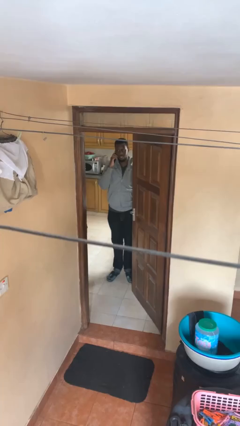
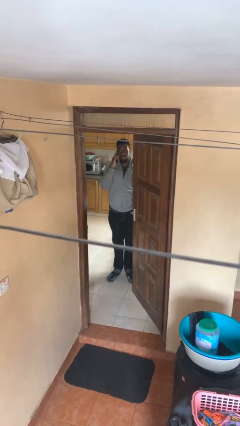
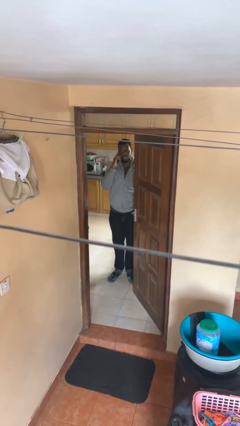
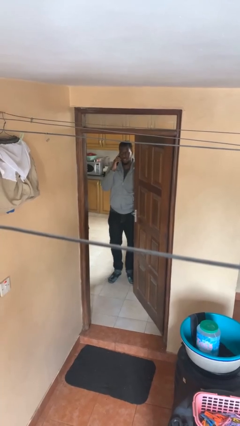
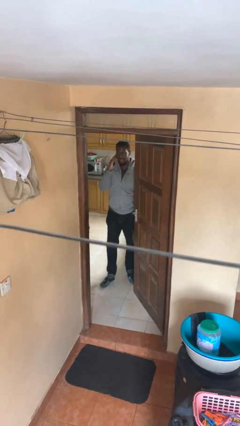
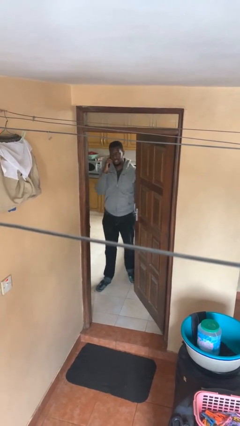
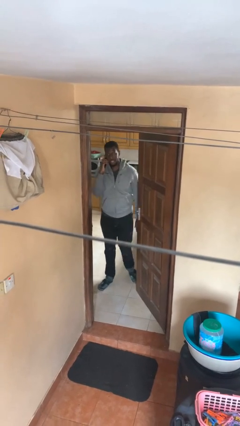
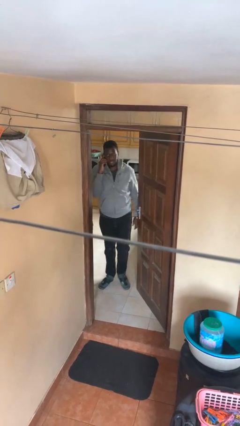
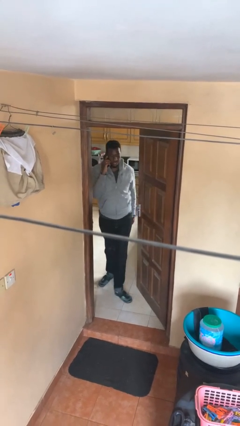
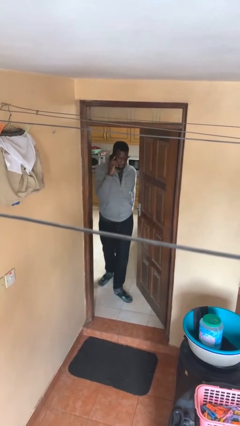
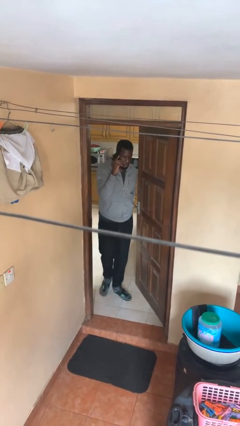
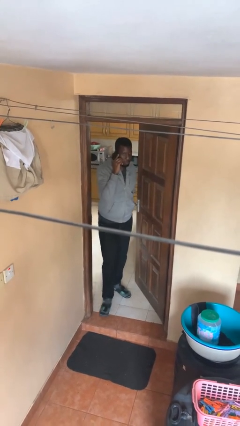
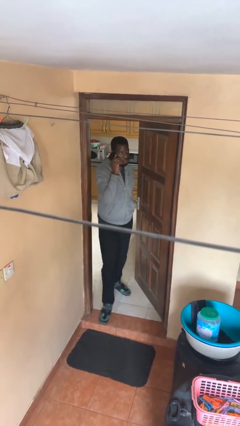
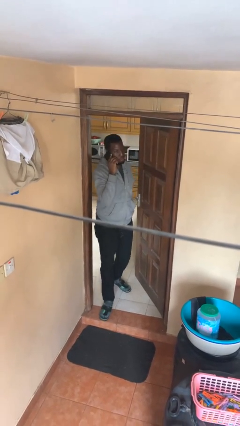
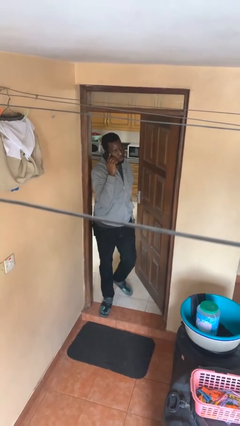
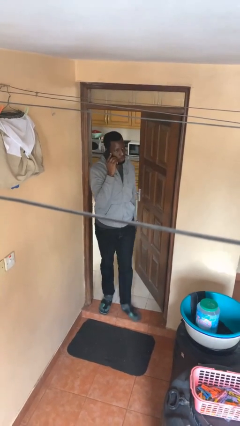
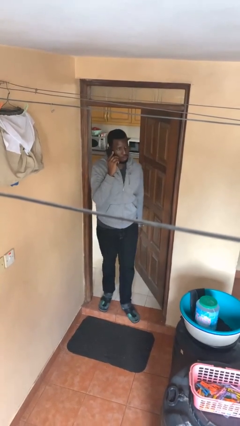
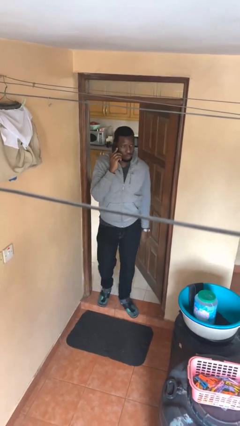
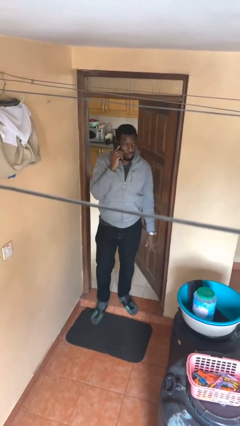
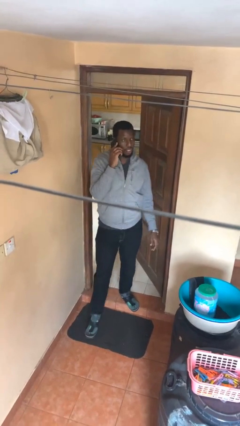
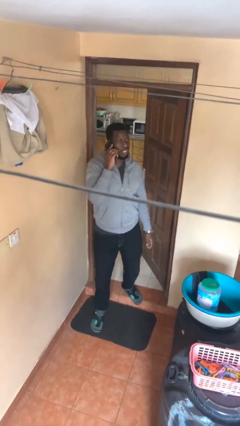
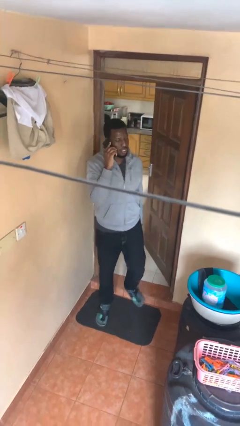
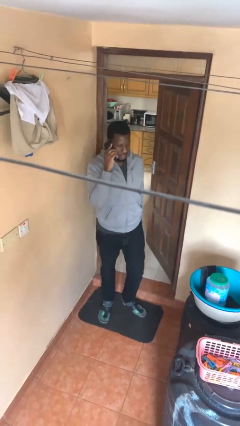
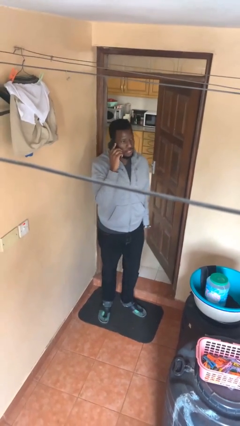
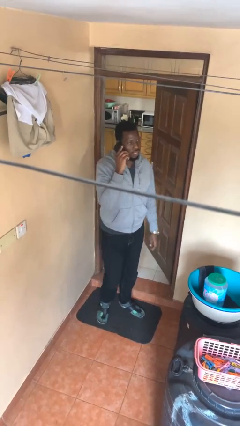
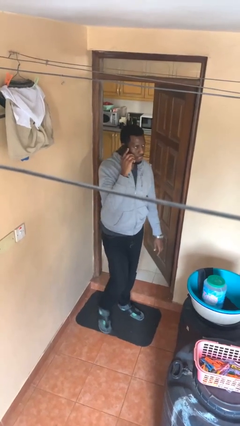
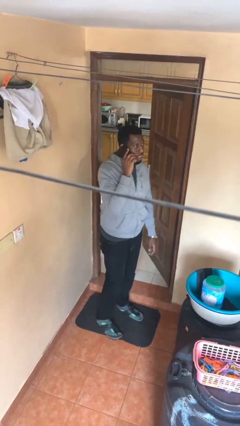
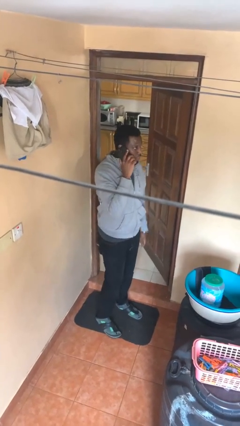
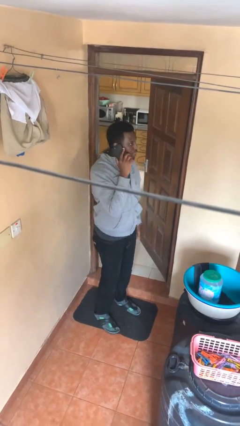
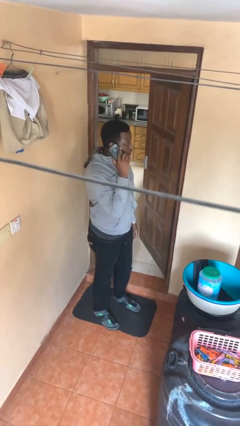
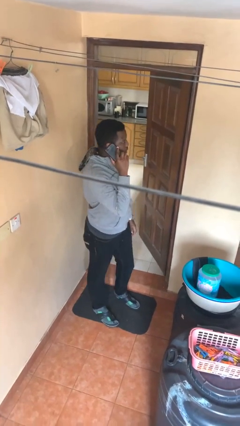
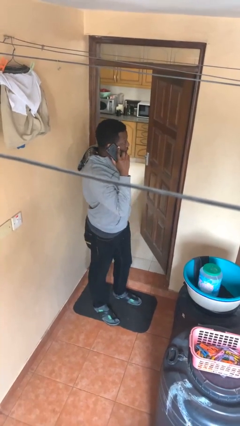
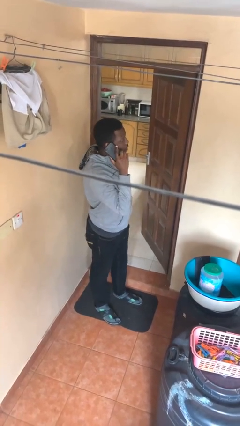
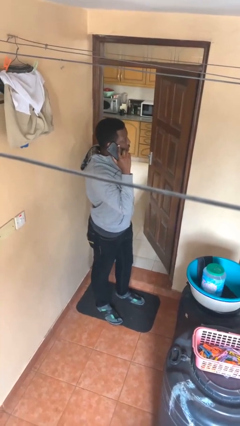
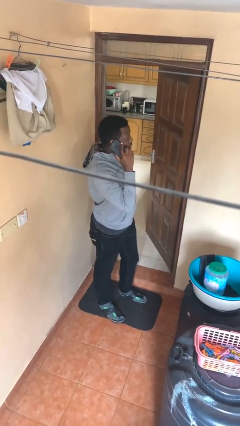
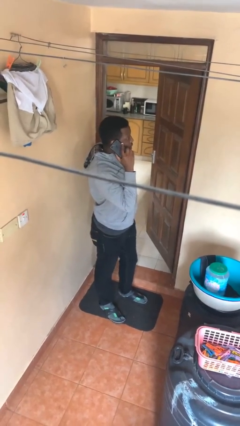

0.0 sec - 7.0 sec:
person enters scene through structure

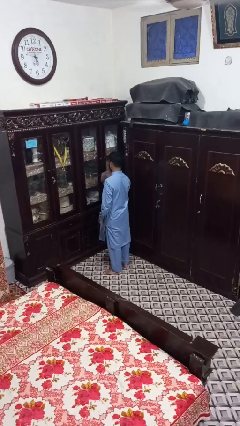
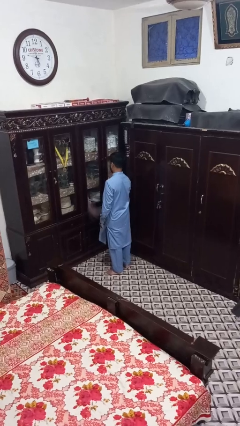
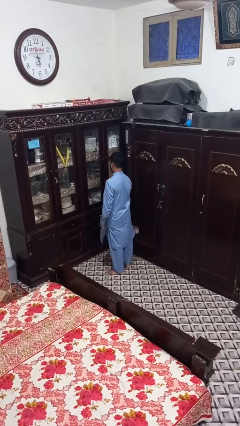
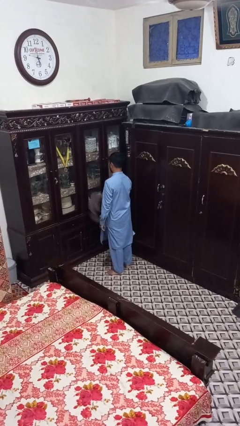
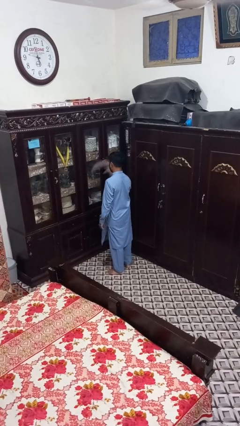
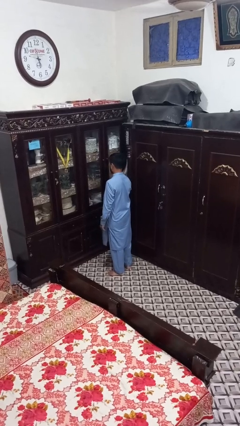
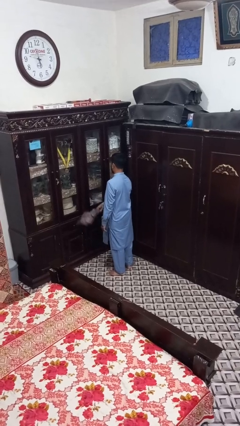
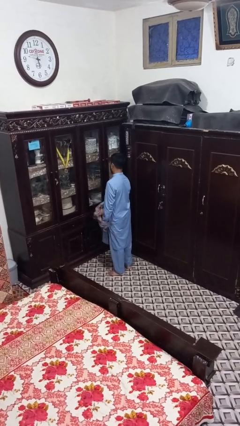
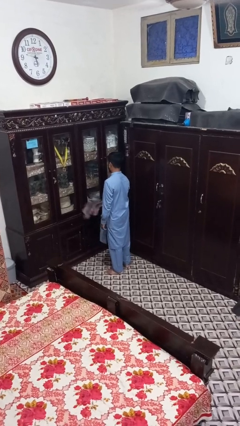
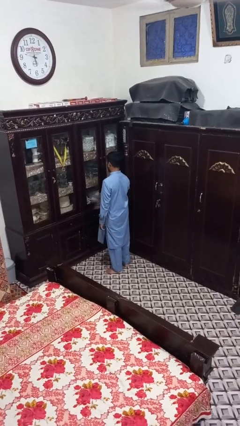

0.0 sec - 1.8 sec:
person dusts furniture

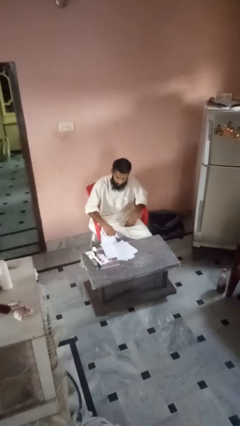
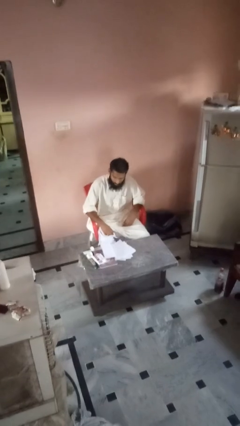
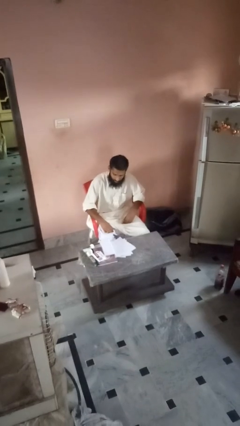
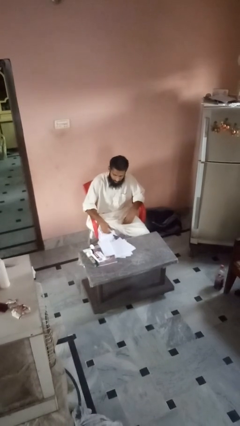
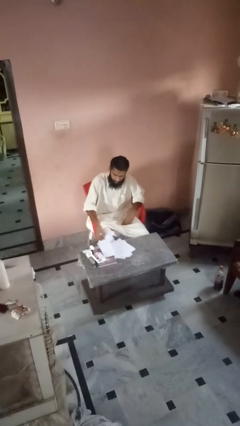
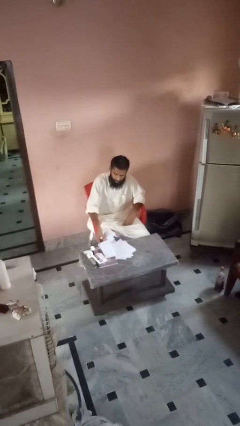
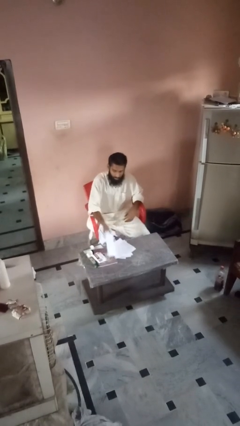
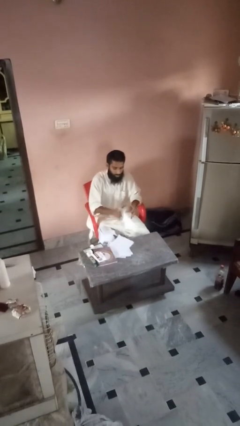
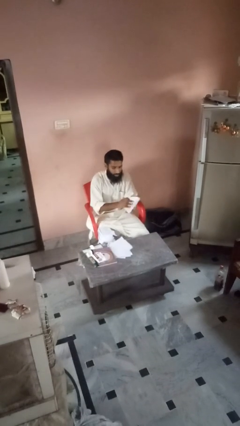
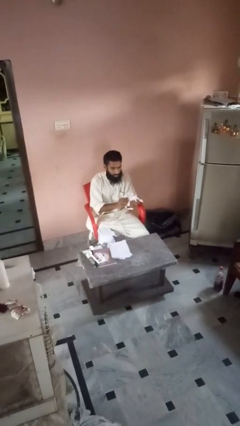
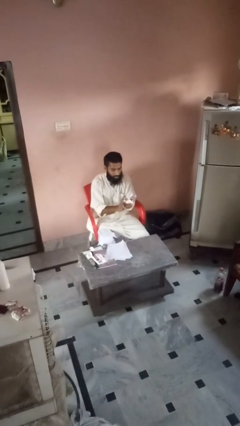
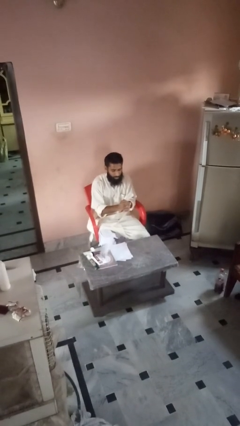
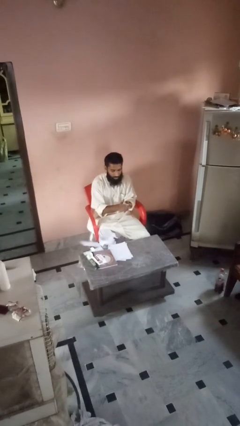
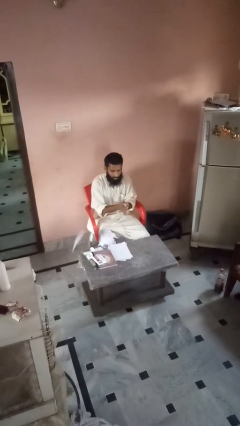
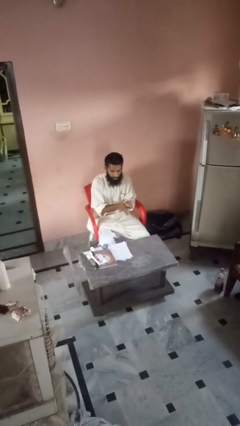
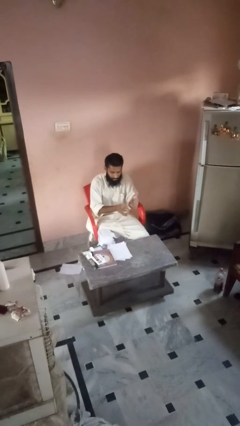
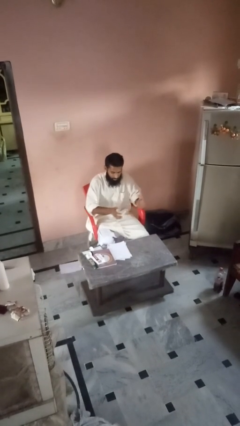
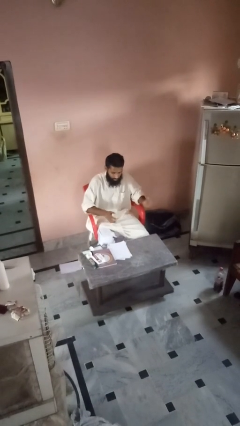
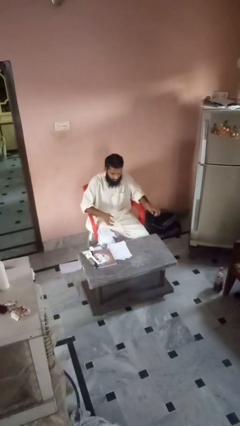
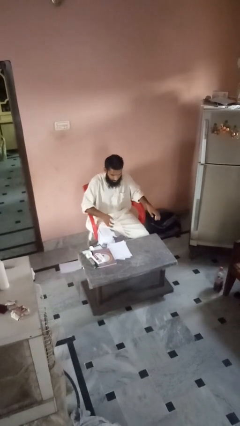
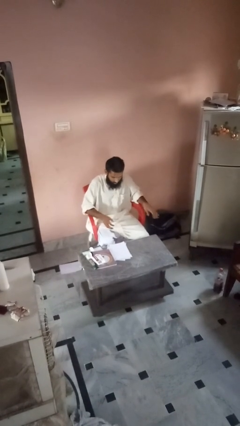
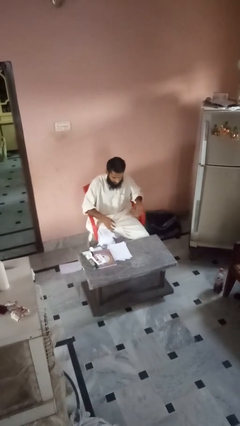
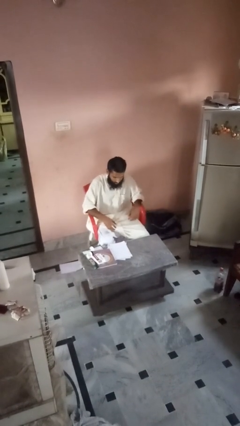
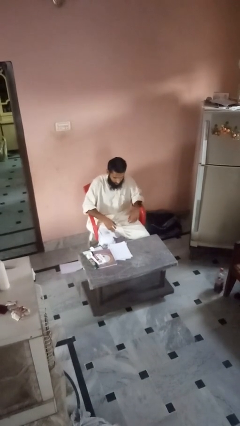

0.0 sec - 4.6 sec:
person crumples paper

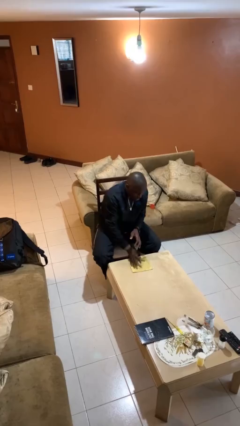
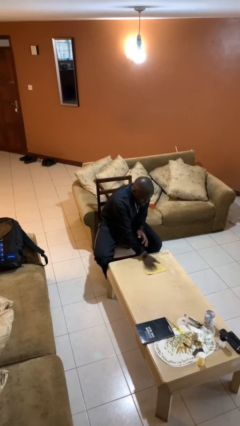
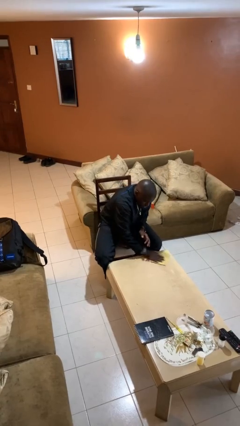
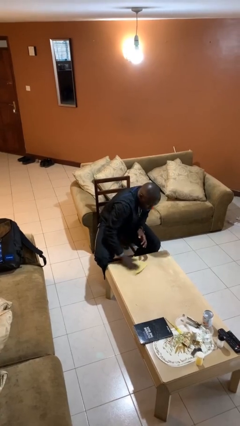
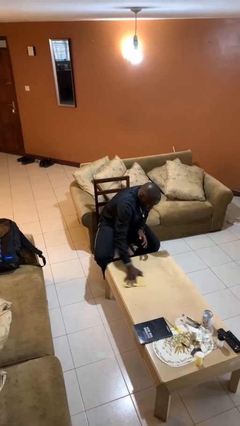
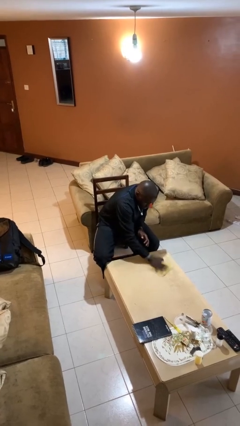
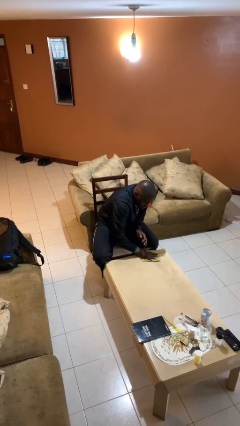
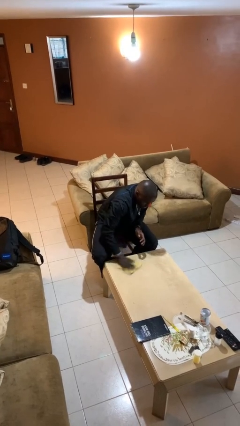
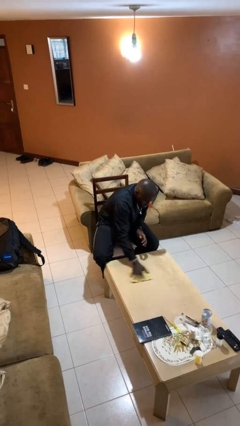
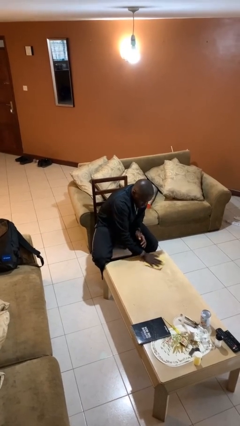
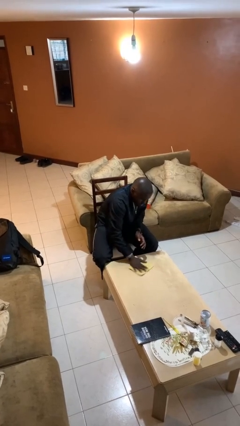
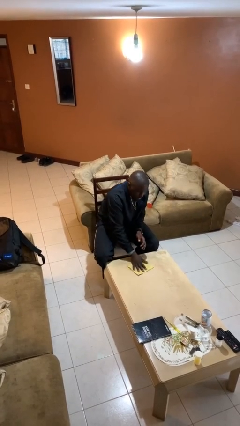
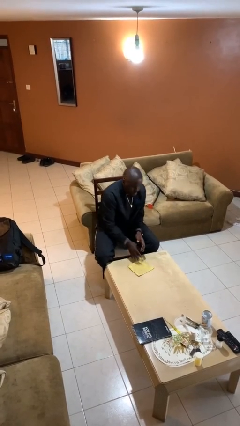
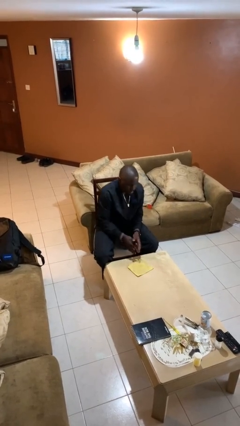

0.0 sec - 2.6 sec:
person cleans table with rag

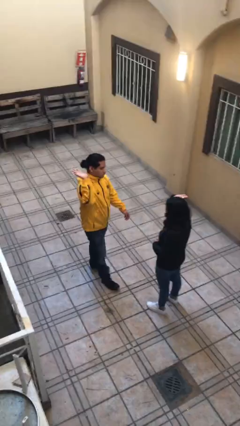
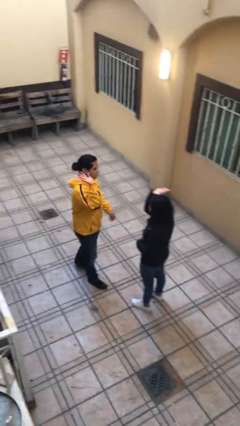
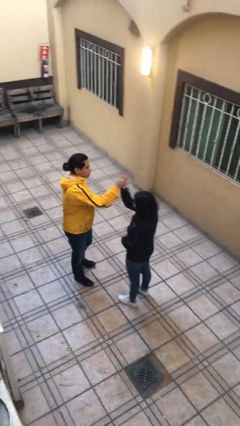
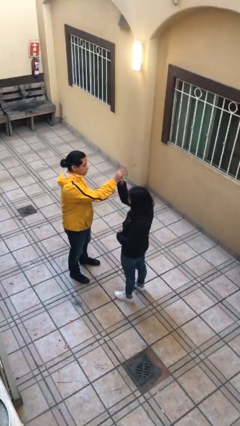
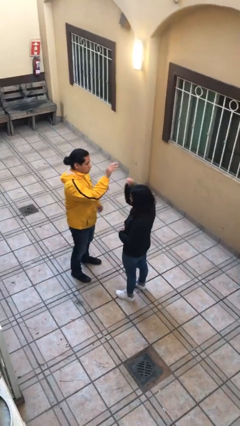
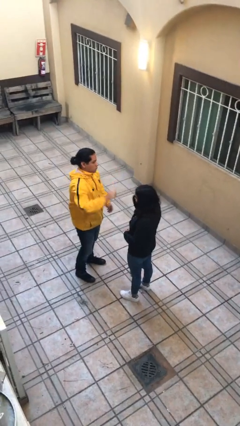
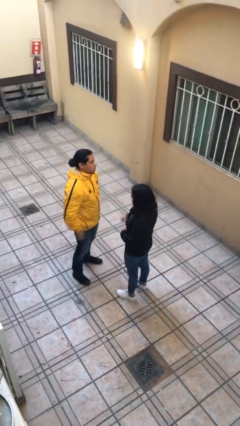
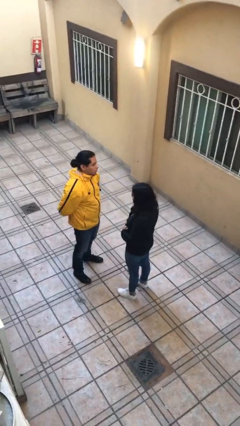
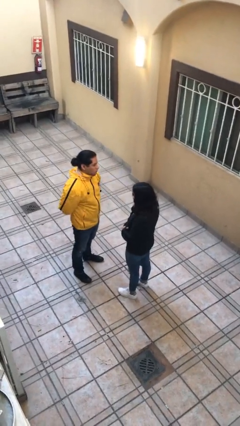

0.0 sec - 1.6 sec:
person highfives hand
